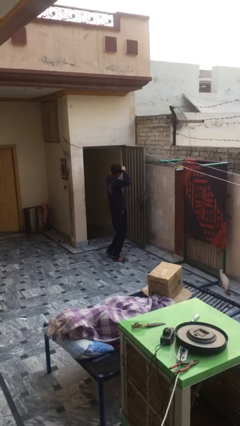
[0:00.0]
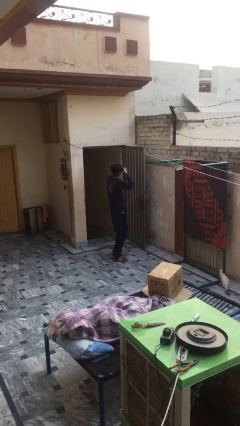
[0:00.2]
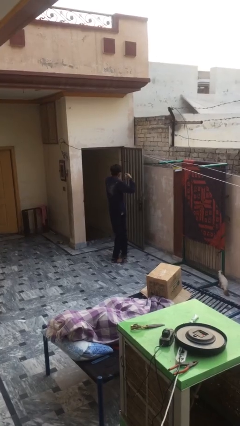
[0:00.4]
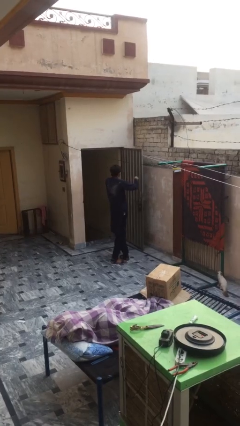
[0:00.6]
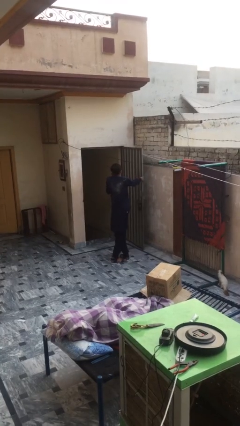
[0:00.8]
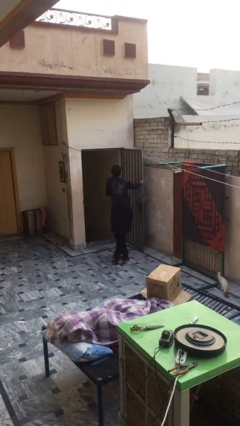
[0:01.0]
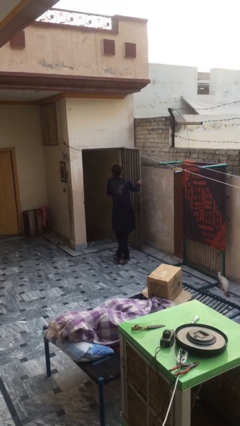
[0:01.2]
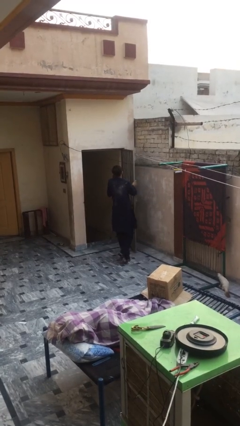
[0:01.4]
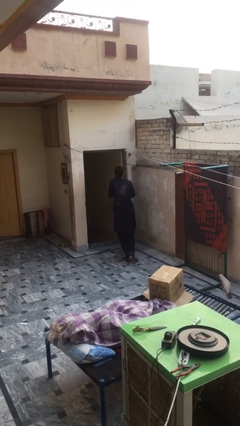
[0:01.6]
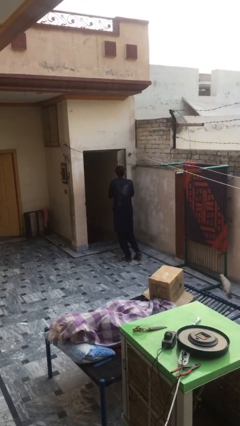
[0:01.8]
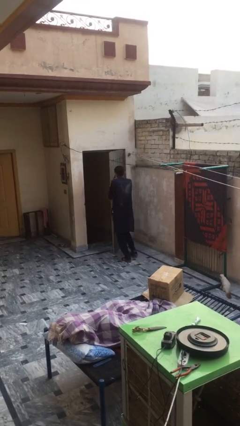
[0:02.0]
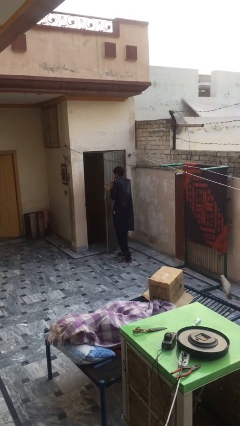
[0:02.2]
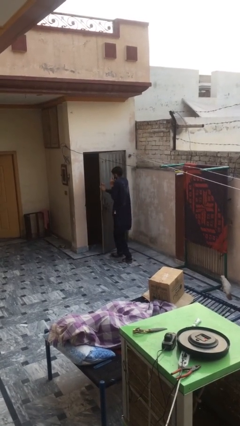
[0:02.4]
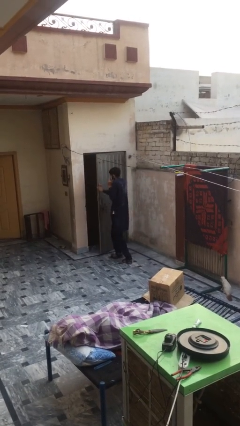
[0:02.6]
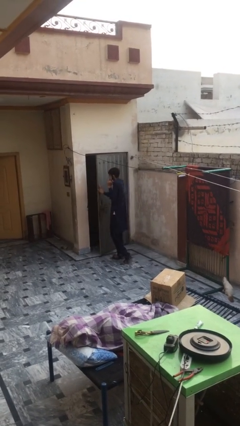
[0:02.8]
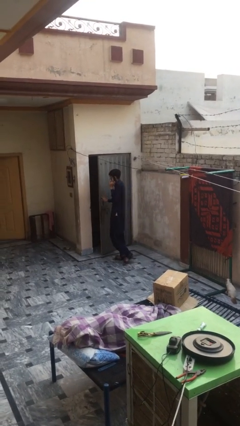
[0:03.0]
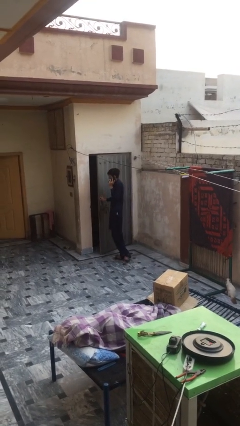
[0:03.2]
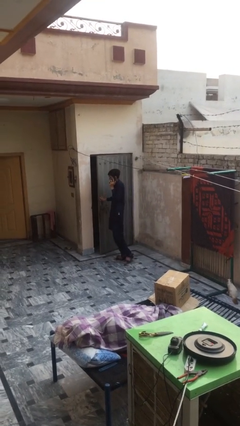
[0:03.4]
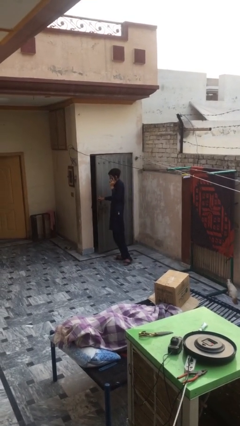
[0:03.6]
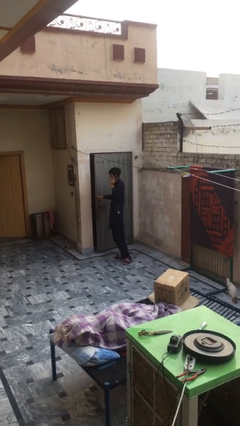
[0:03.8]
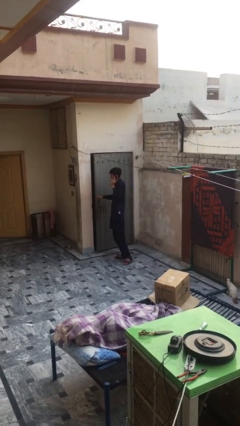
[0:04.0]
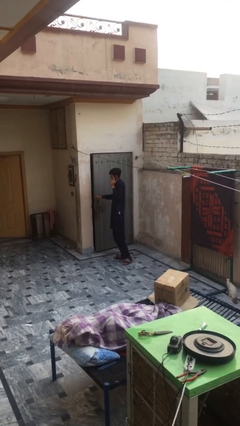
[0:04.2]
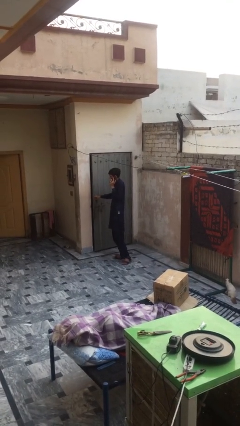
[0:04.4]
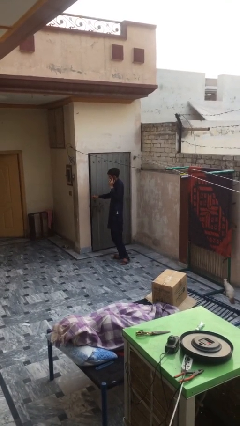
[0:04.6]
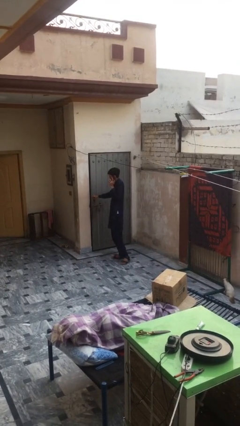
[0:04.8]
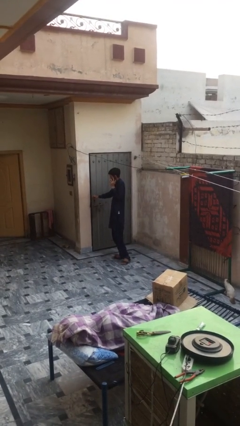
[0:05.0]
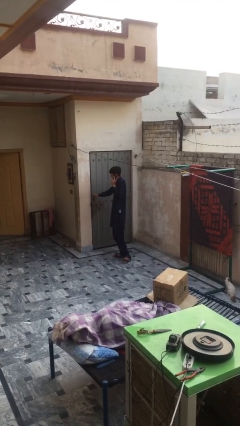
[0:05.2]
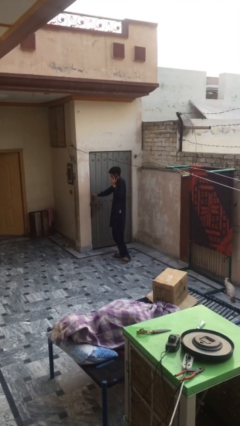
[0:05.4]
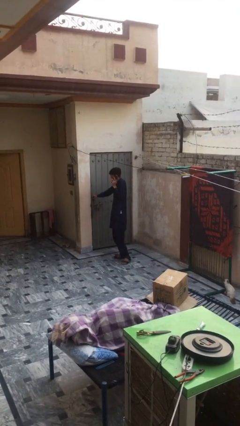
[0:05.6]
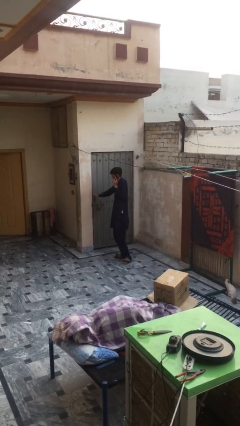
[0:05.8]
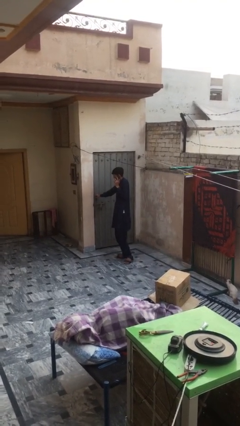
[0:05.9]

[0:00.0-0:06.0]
person closes facility door

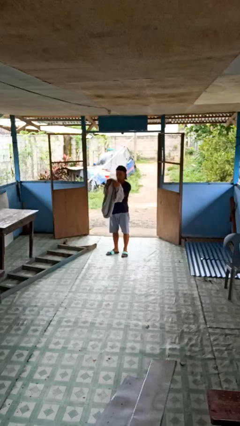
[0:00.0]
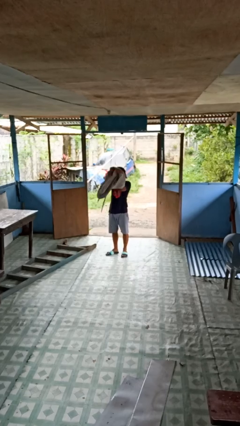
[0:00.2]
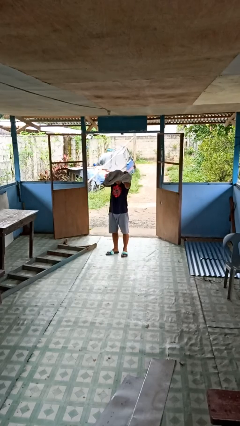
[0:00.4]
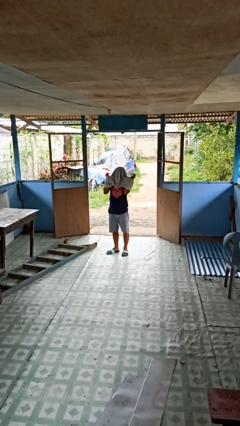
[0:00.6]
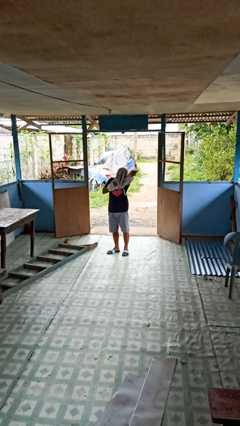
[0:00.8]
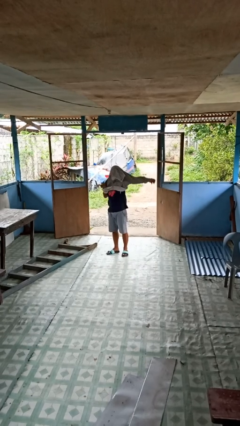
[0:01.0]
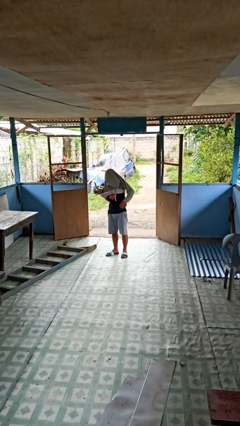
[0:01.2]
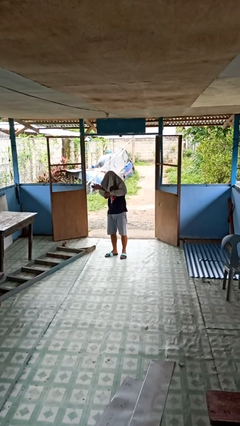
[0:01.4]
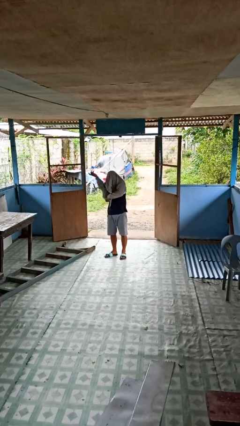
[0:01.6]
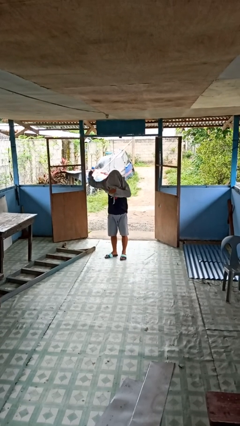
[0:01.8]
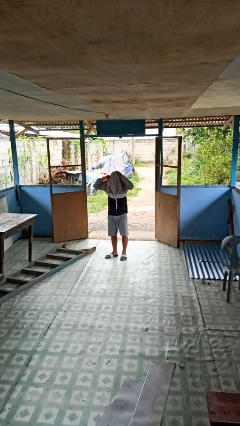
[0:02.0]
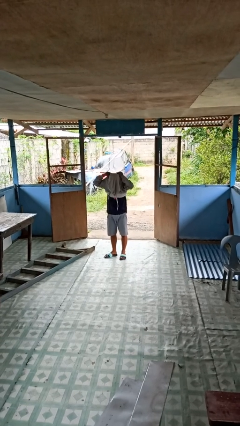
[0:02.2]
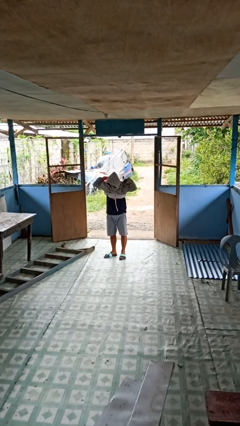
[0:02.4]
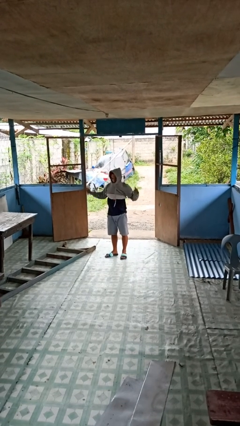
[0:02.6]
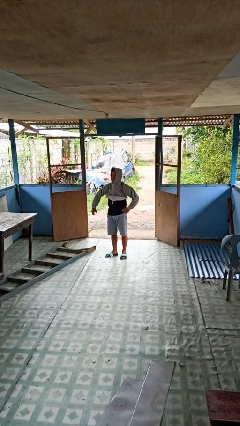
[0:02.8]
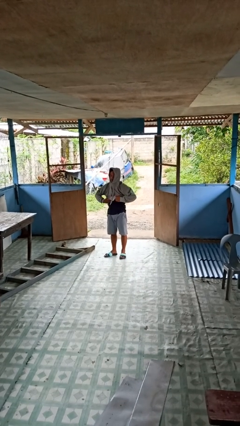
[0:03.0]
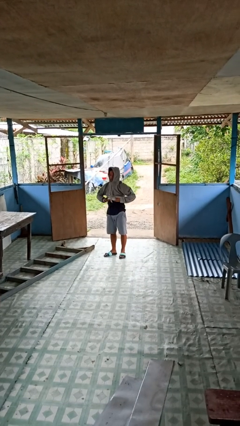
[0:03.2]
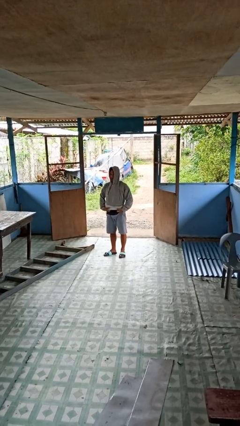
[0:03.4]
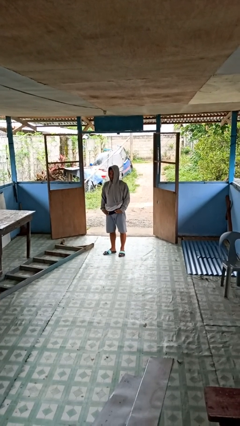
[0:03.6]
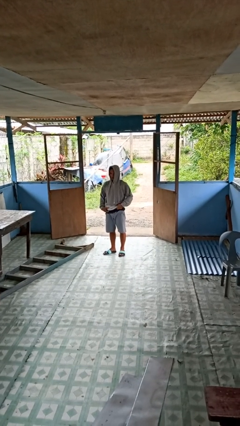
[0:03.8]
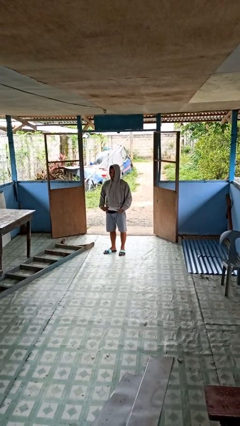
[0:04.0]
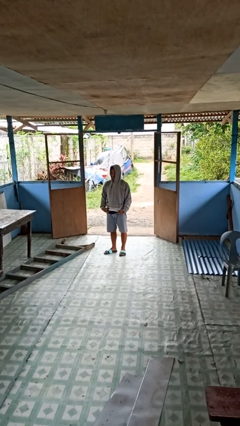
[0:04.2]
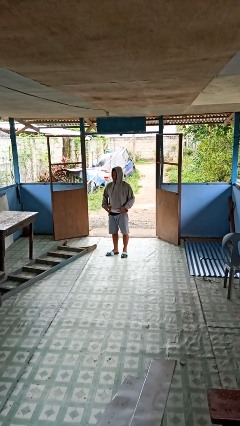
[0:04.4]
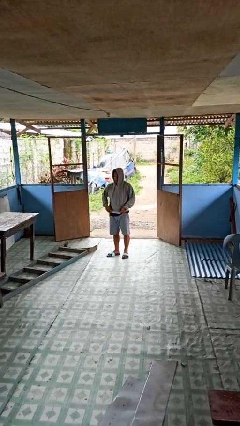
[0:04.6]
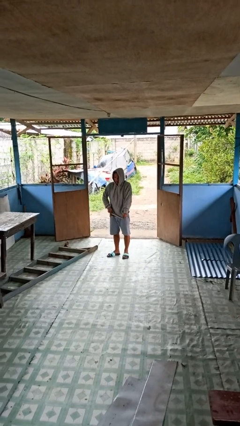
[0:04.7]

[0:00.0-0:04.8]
person puts on hoodie

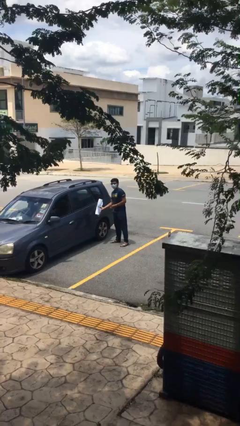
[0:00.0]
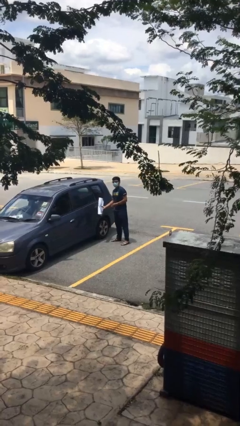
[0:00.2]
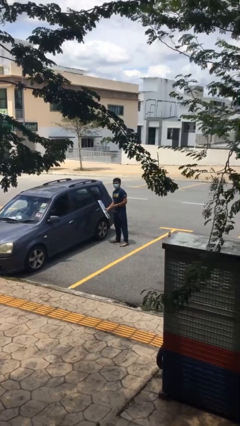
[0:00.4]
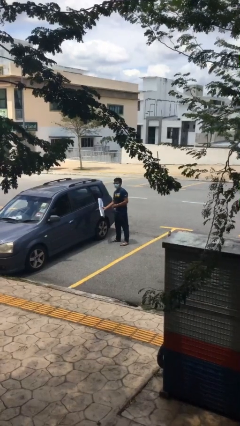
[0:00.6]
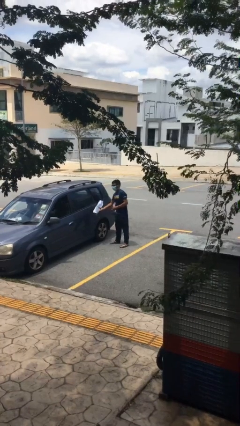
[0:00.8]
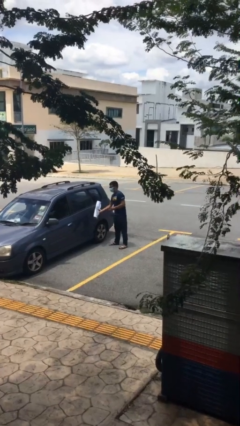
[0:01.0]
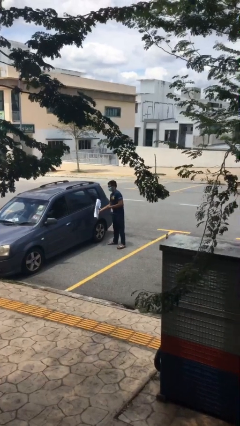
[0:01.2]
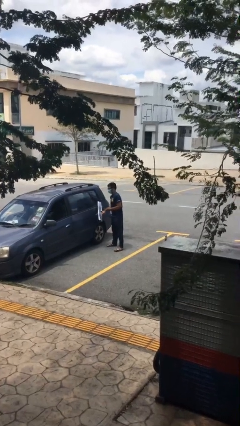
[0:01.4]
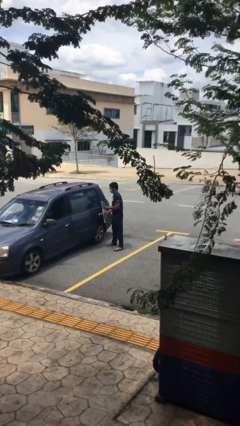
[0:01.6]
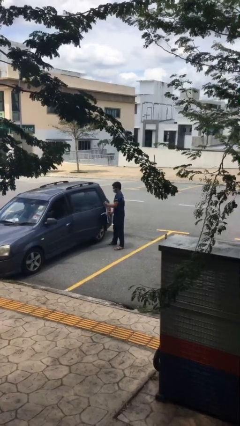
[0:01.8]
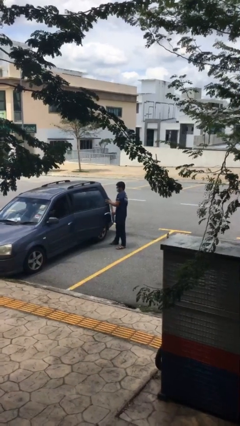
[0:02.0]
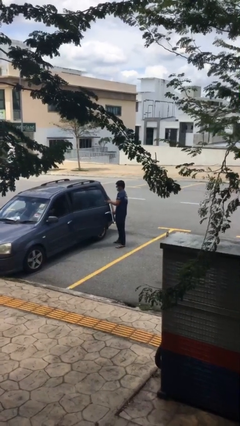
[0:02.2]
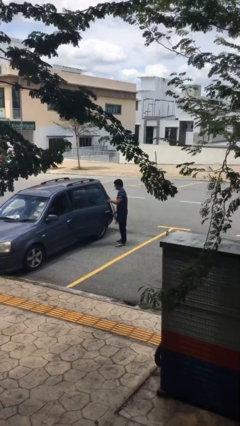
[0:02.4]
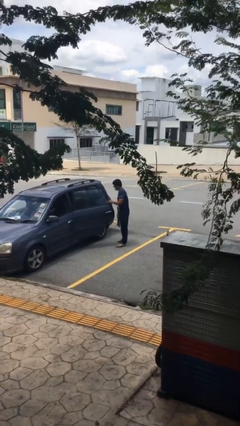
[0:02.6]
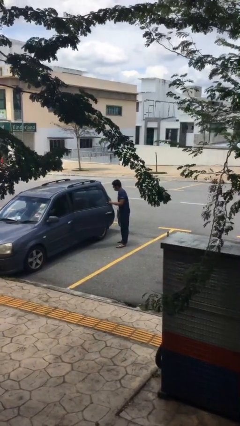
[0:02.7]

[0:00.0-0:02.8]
person opens car door

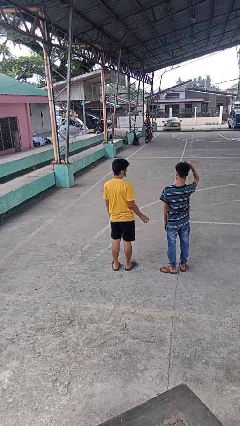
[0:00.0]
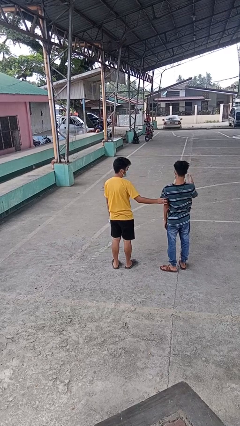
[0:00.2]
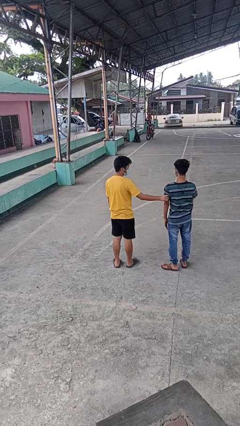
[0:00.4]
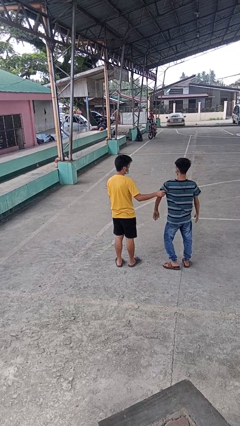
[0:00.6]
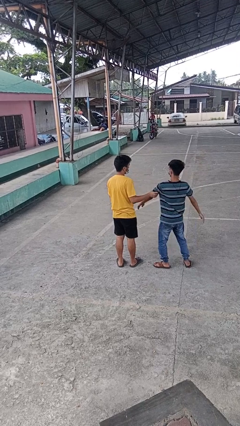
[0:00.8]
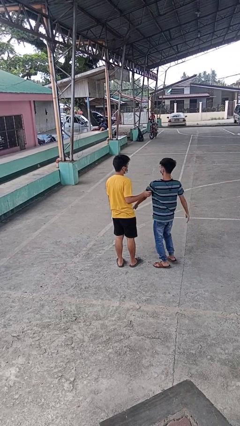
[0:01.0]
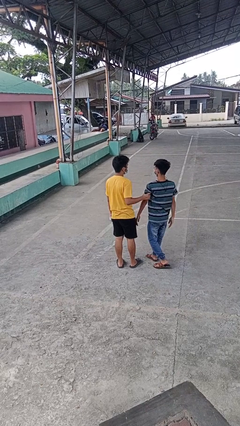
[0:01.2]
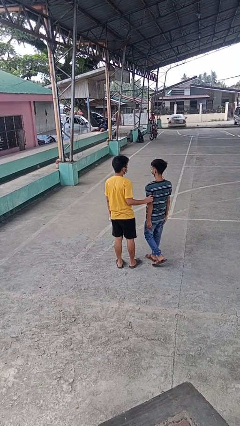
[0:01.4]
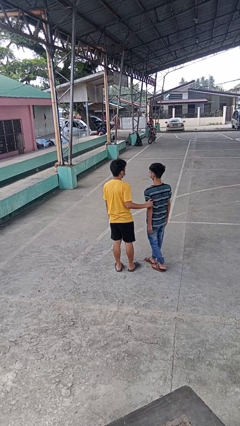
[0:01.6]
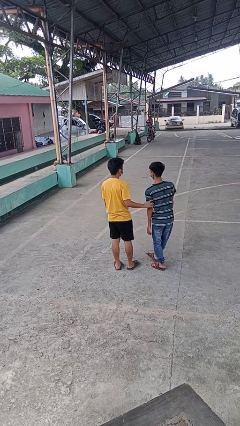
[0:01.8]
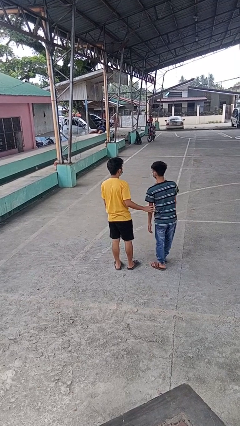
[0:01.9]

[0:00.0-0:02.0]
person grabs person by bicep

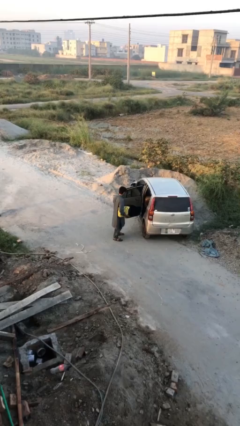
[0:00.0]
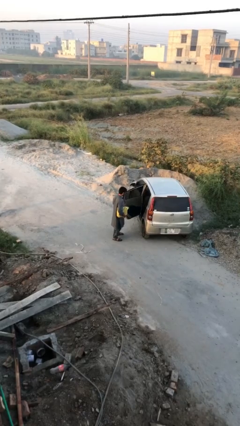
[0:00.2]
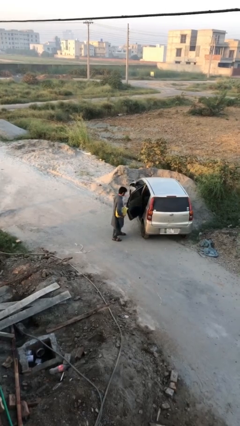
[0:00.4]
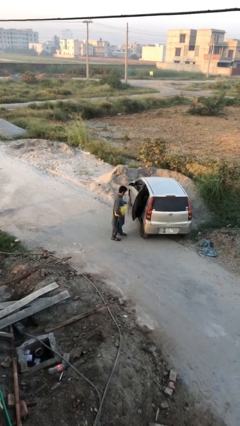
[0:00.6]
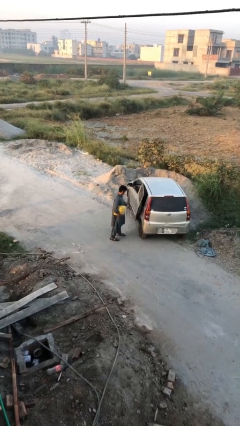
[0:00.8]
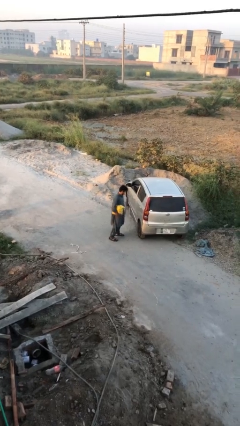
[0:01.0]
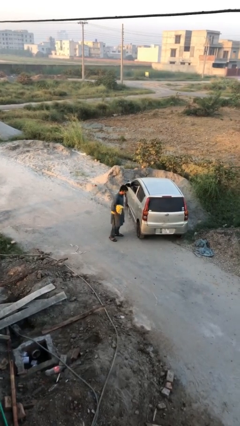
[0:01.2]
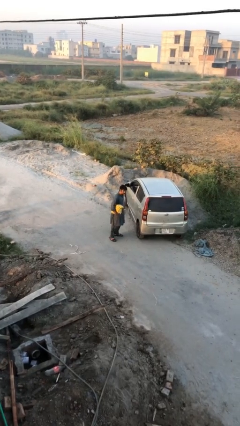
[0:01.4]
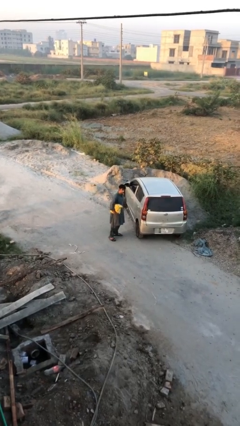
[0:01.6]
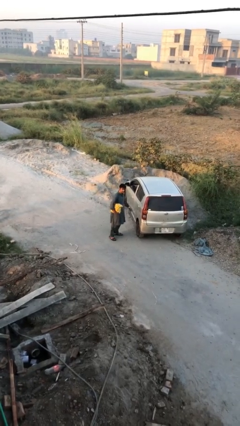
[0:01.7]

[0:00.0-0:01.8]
person closes car door

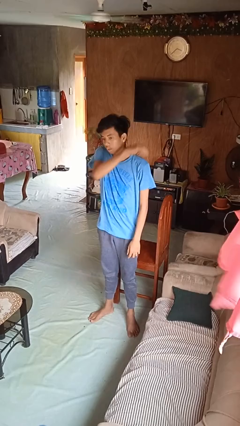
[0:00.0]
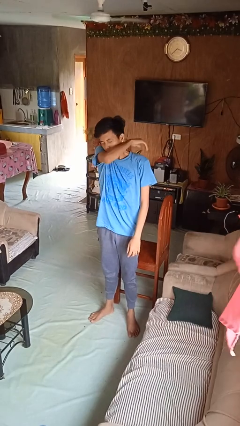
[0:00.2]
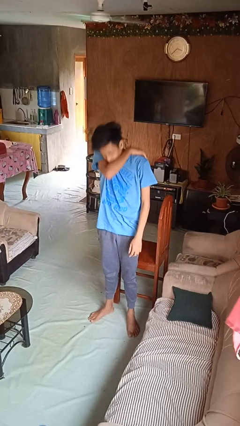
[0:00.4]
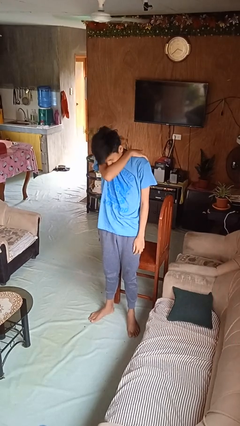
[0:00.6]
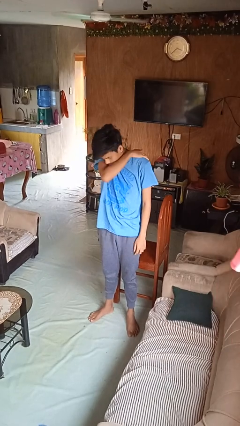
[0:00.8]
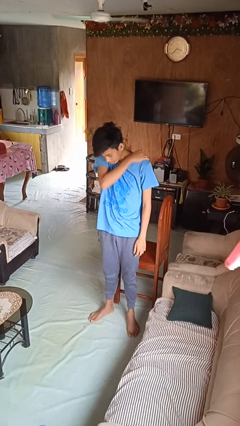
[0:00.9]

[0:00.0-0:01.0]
person sneezes into arm
